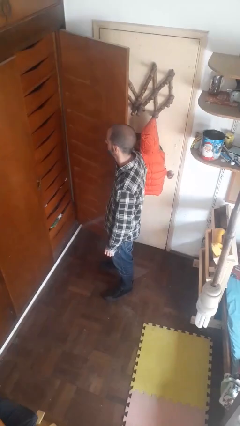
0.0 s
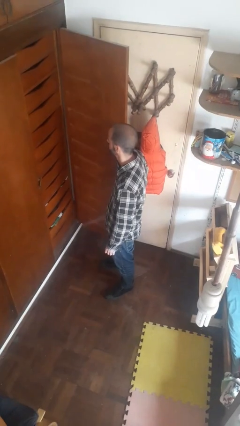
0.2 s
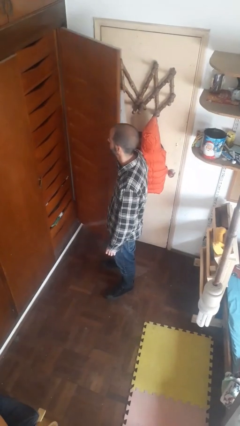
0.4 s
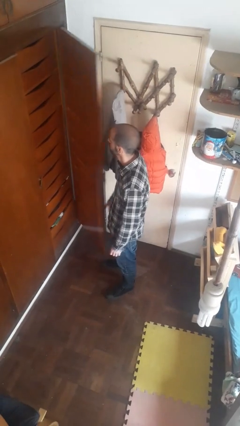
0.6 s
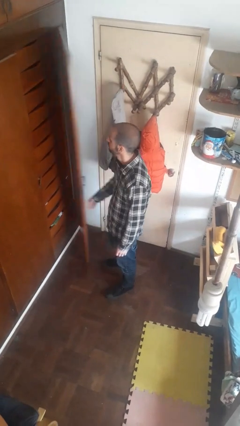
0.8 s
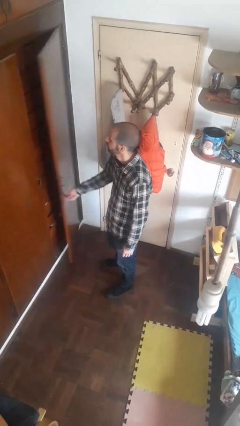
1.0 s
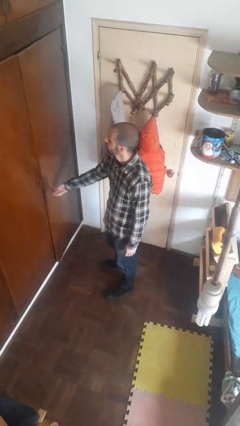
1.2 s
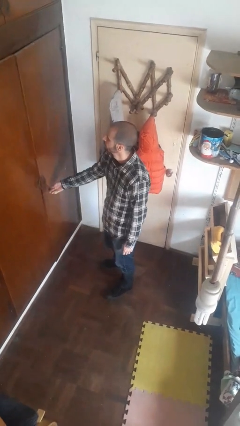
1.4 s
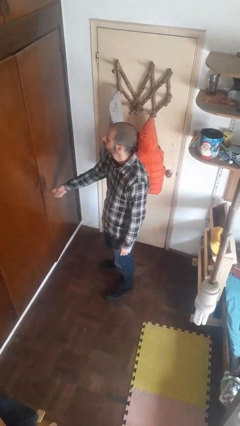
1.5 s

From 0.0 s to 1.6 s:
person closes closet door

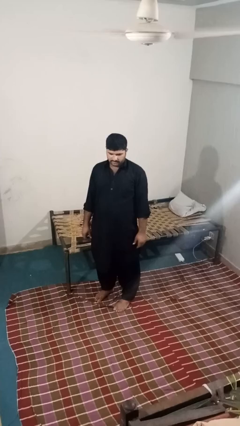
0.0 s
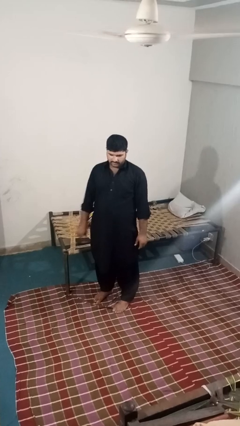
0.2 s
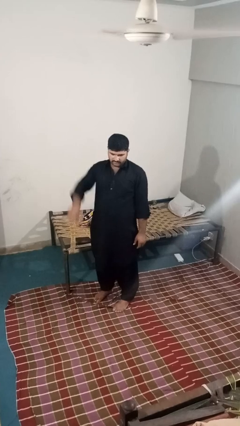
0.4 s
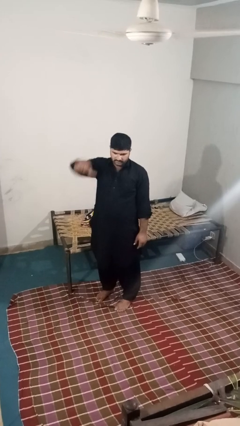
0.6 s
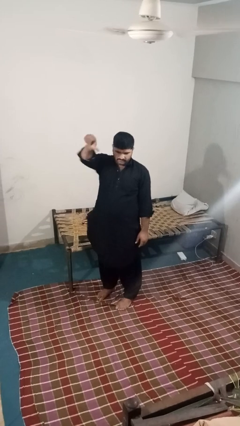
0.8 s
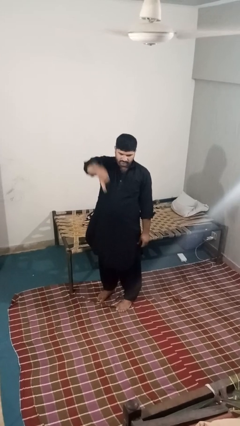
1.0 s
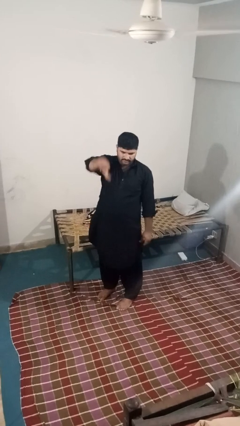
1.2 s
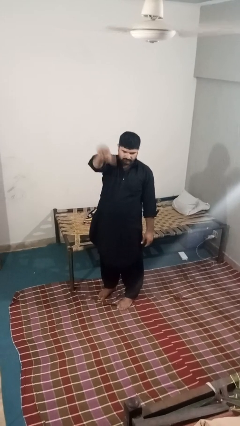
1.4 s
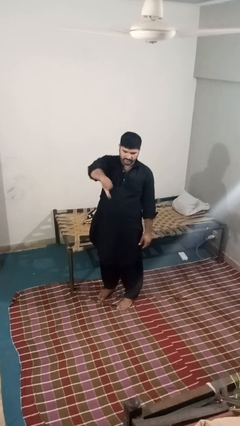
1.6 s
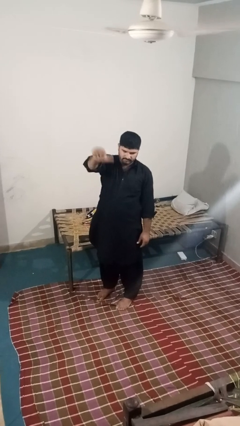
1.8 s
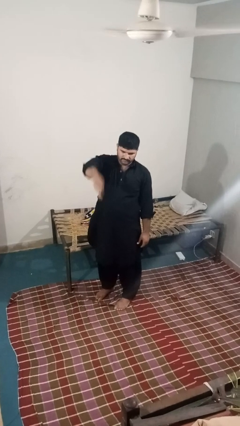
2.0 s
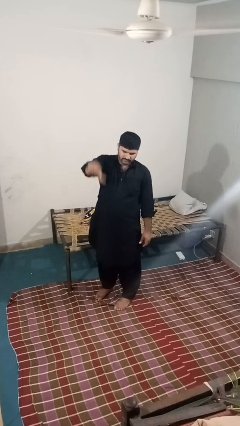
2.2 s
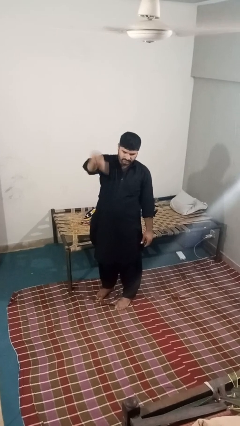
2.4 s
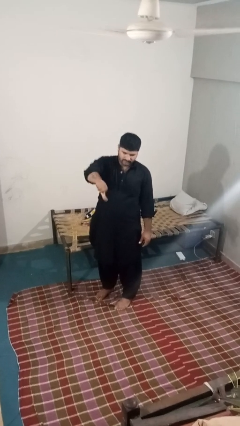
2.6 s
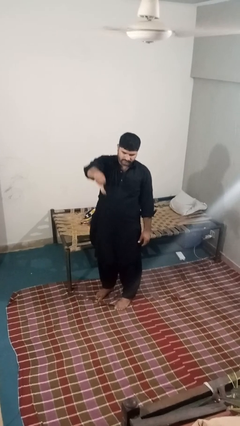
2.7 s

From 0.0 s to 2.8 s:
person gestures thumbs down

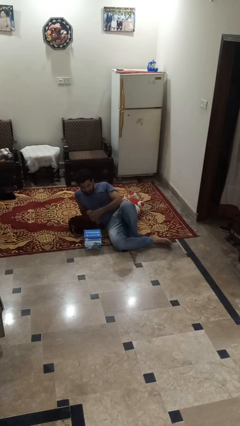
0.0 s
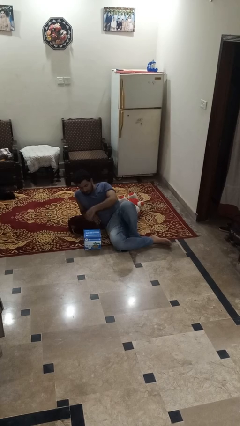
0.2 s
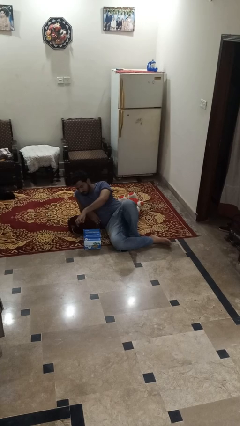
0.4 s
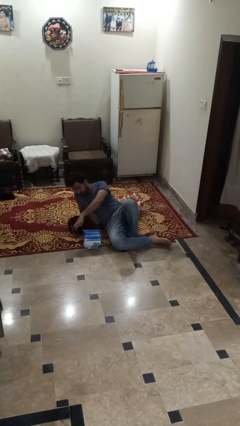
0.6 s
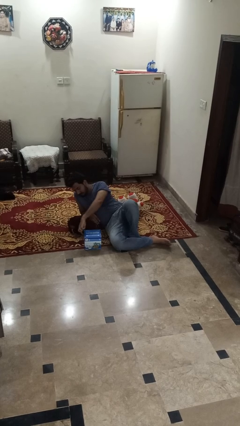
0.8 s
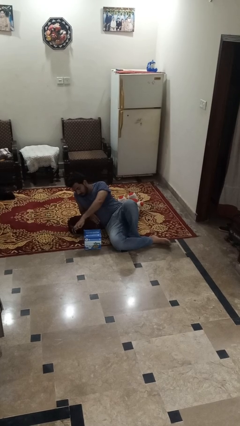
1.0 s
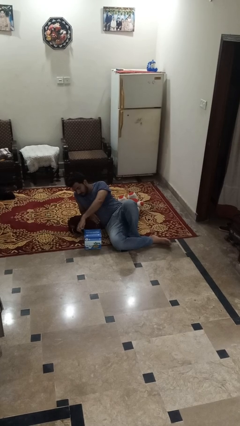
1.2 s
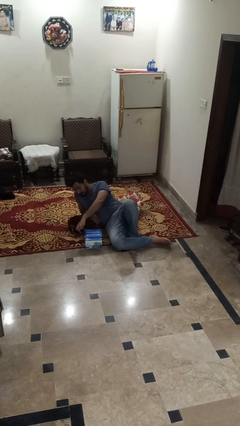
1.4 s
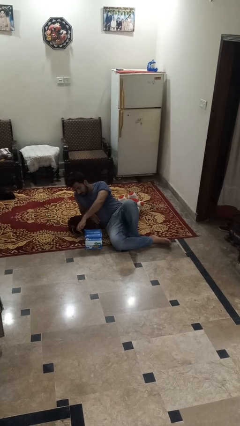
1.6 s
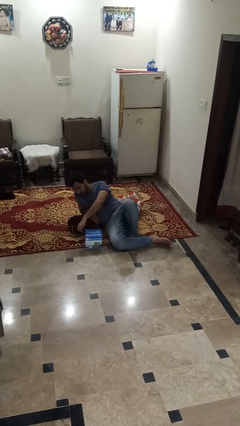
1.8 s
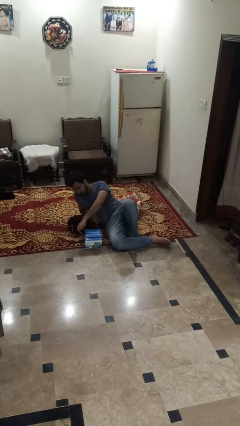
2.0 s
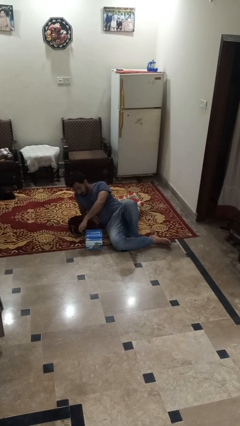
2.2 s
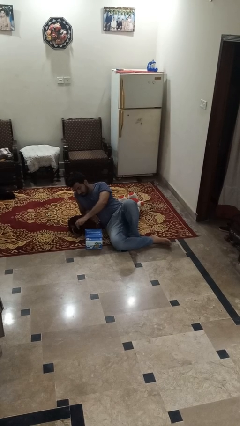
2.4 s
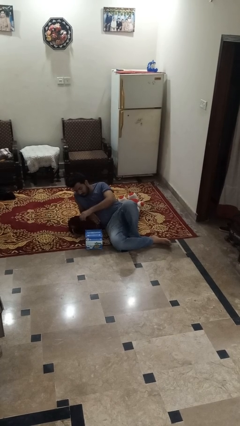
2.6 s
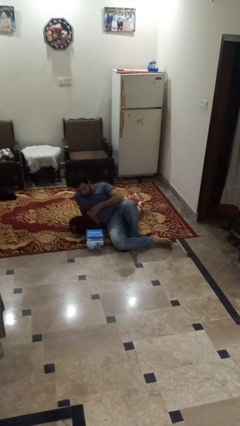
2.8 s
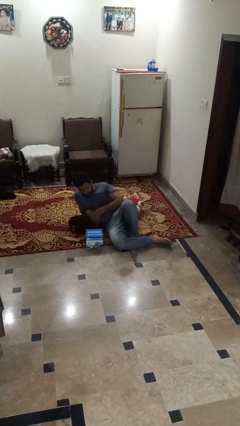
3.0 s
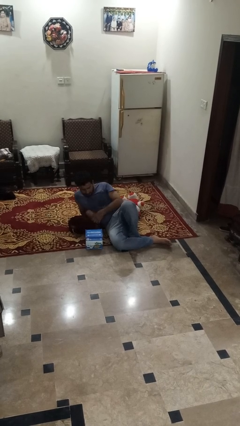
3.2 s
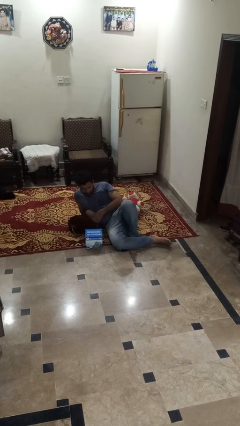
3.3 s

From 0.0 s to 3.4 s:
person taps object with finger

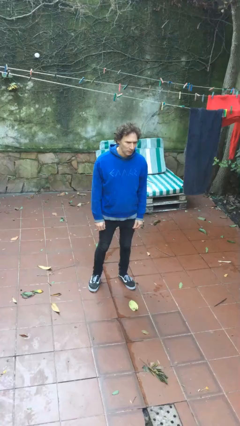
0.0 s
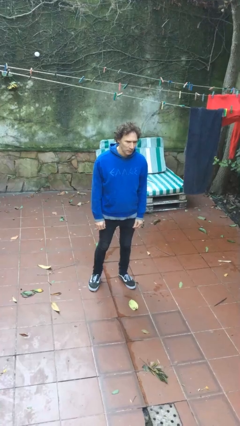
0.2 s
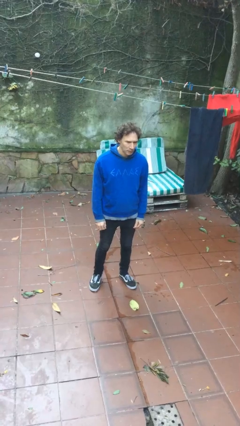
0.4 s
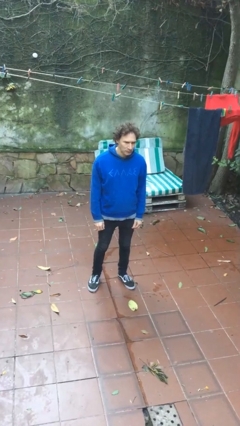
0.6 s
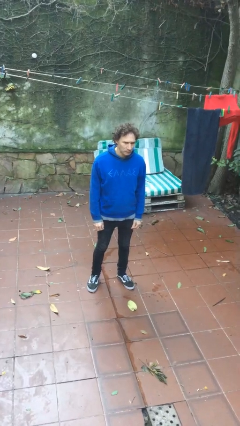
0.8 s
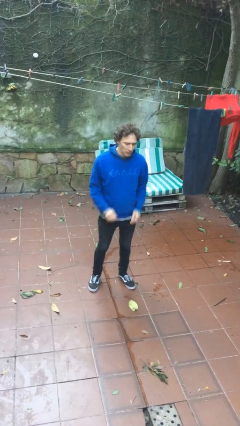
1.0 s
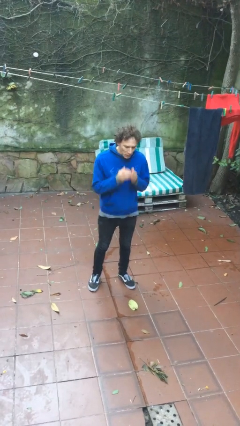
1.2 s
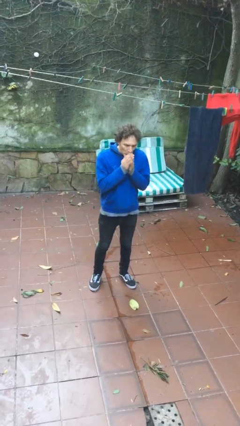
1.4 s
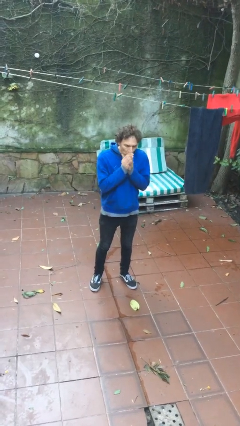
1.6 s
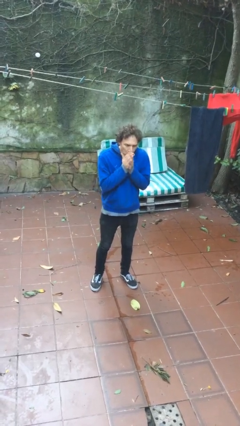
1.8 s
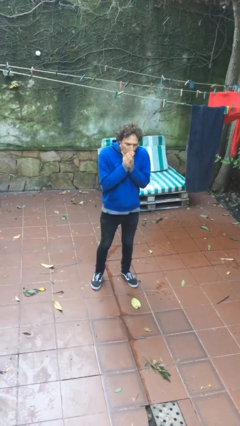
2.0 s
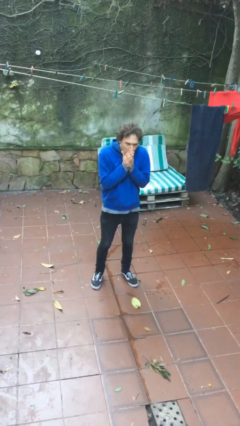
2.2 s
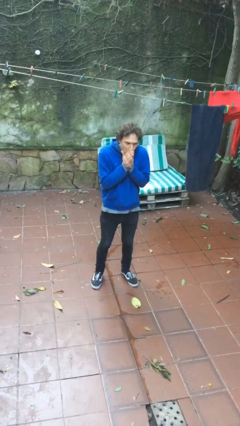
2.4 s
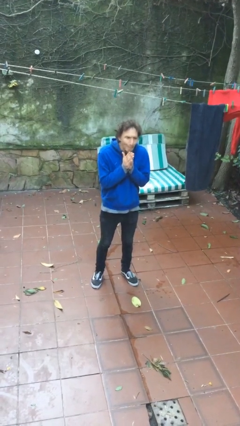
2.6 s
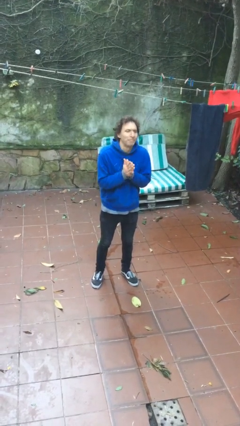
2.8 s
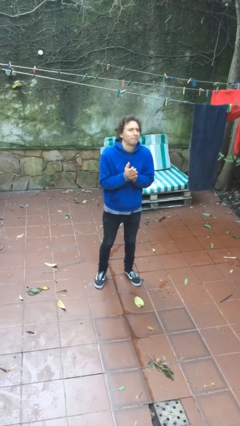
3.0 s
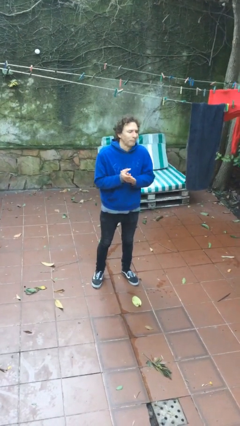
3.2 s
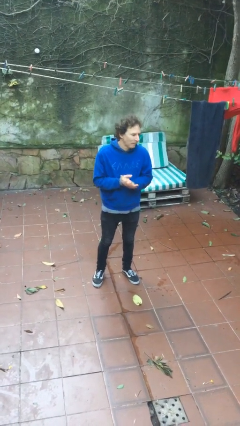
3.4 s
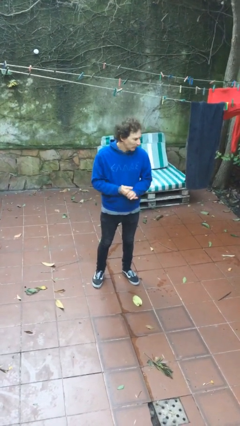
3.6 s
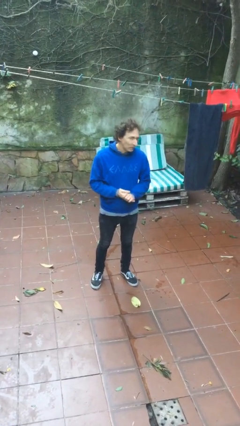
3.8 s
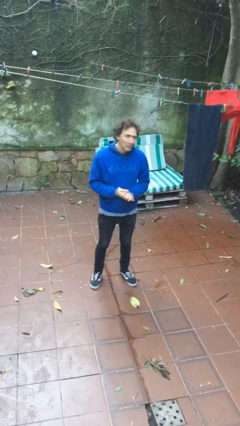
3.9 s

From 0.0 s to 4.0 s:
person blows into hands

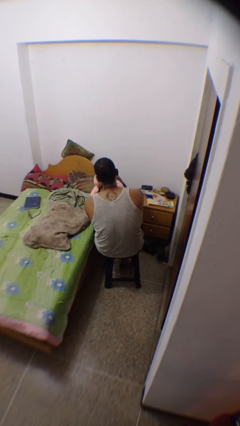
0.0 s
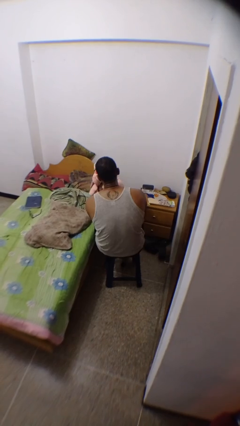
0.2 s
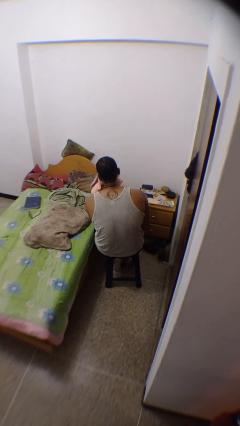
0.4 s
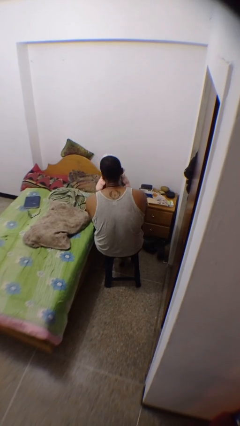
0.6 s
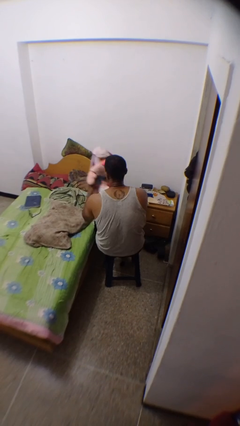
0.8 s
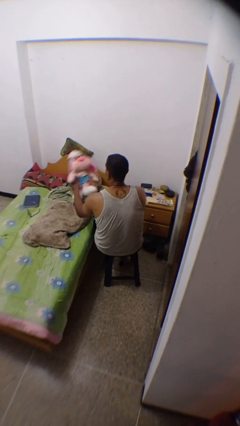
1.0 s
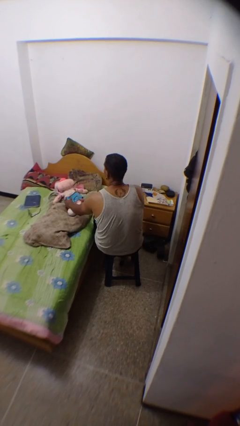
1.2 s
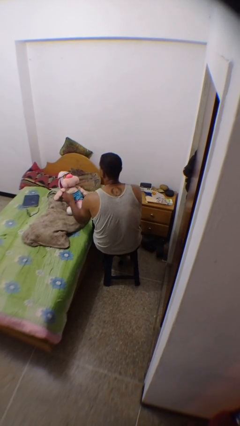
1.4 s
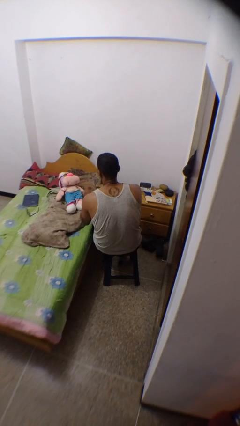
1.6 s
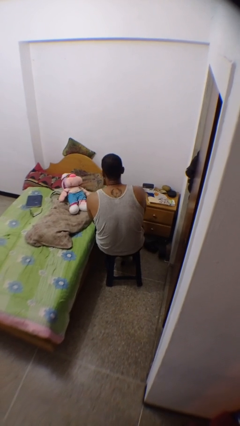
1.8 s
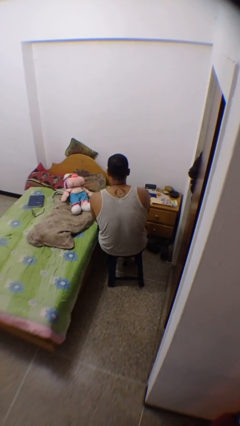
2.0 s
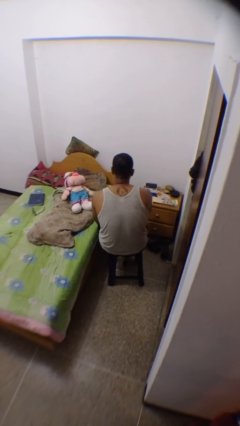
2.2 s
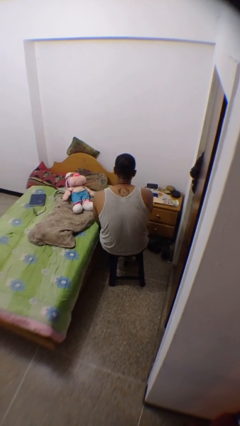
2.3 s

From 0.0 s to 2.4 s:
person puts down object on bed

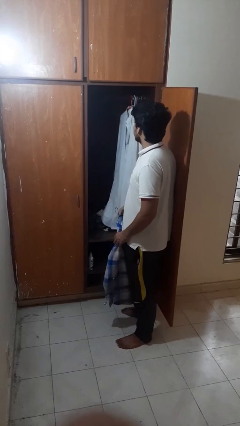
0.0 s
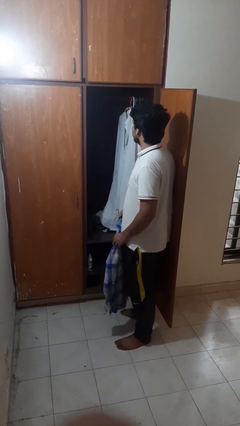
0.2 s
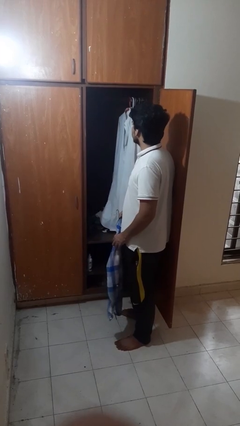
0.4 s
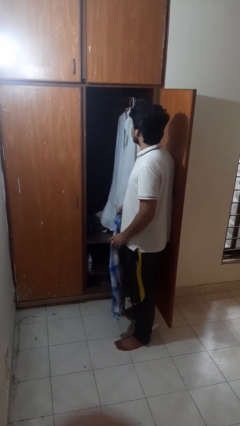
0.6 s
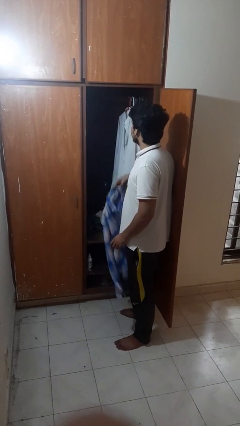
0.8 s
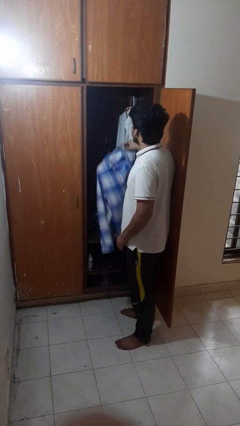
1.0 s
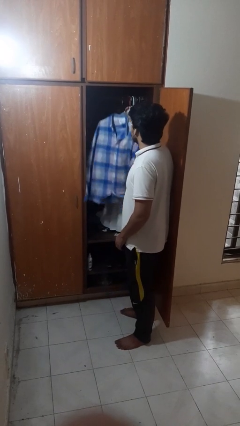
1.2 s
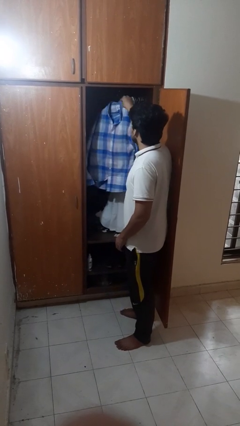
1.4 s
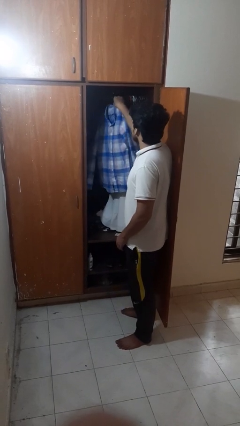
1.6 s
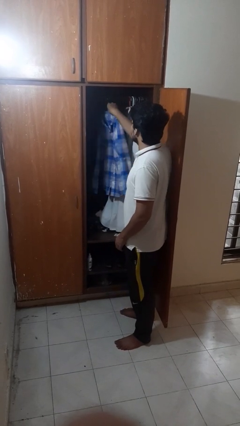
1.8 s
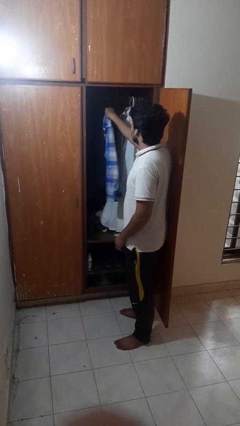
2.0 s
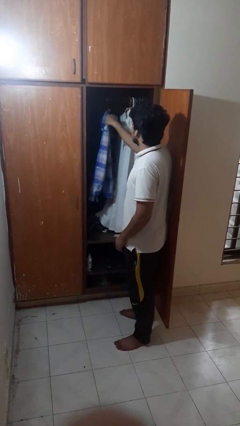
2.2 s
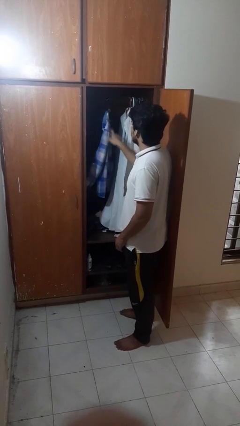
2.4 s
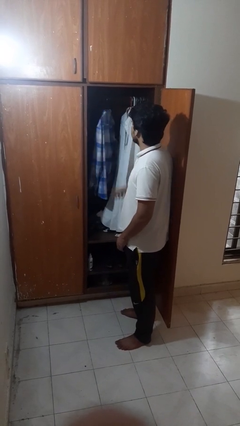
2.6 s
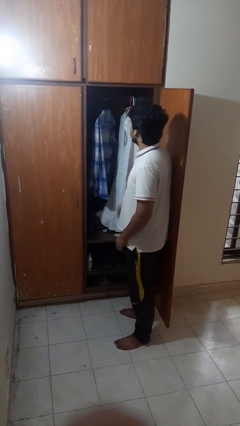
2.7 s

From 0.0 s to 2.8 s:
person puts clothes into closet

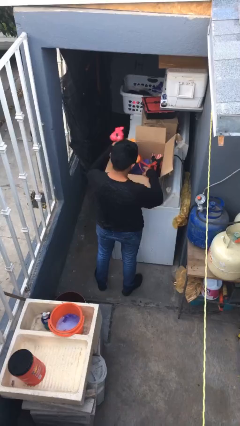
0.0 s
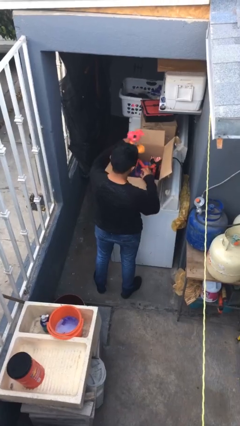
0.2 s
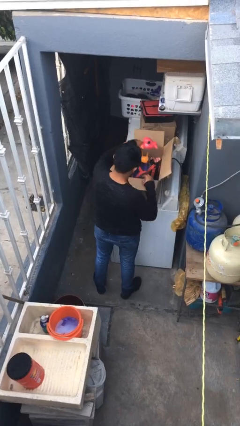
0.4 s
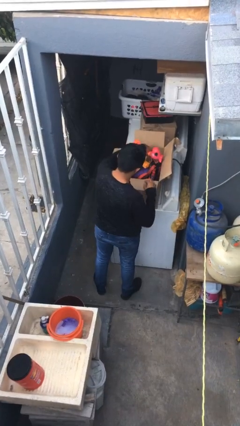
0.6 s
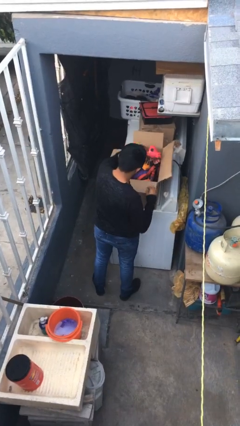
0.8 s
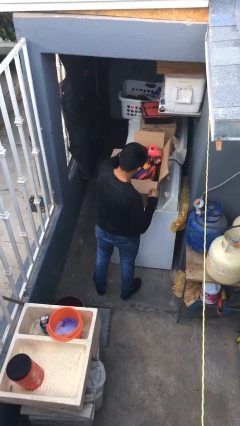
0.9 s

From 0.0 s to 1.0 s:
person puts object into box
